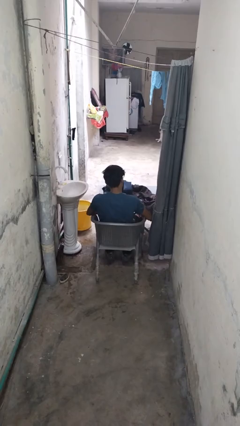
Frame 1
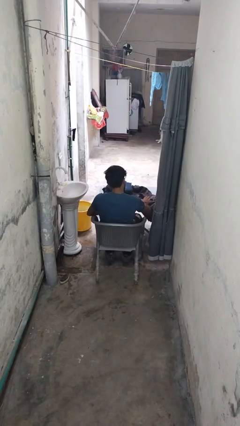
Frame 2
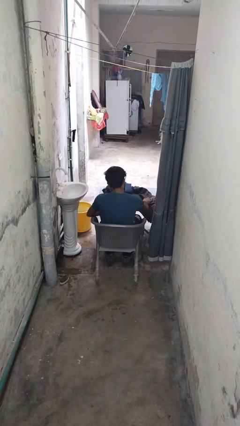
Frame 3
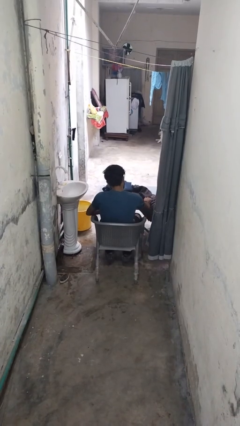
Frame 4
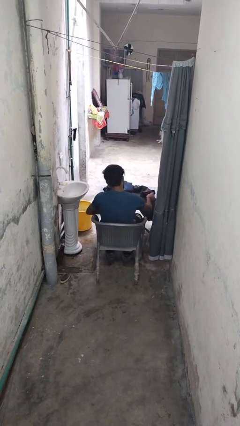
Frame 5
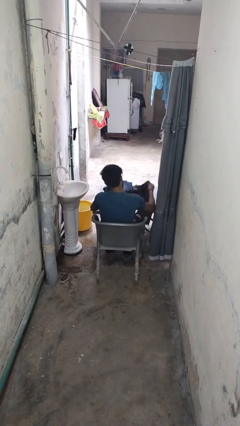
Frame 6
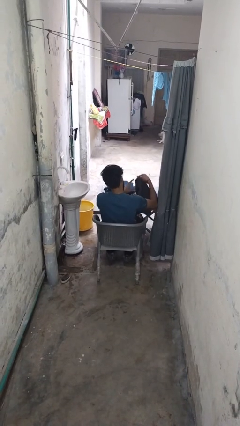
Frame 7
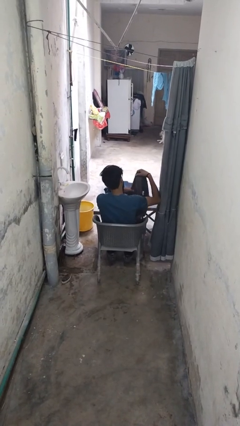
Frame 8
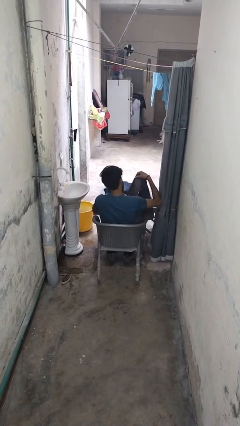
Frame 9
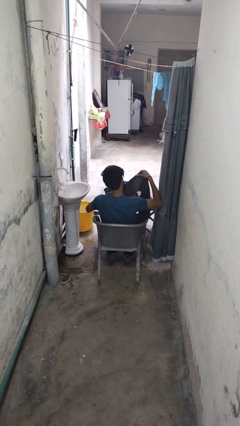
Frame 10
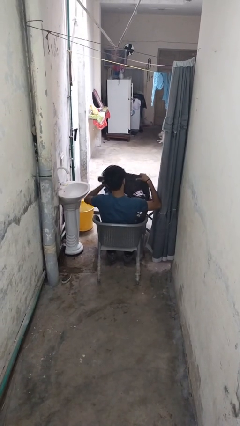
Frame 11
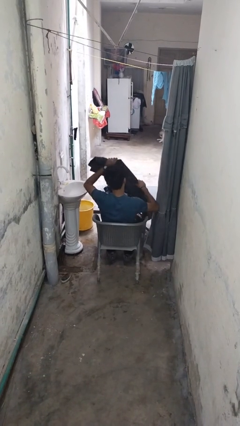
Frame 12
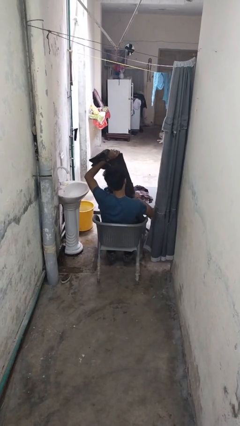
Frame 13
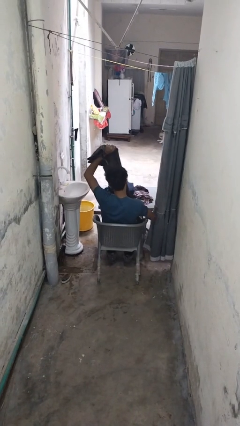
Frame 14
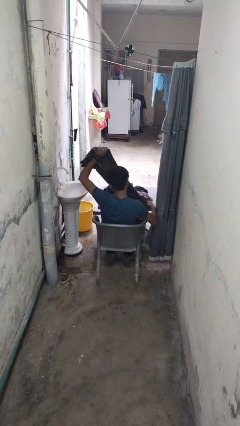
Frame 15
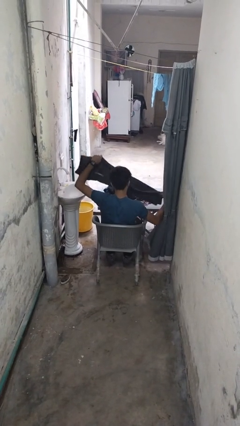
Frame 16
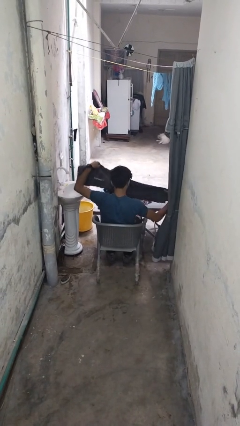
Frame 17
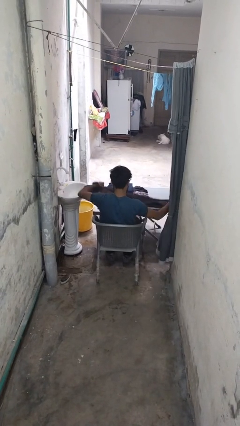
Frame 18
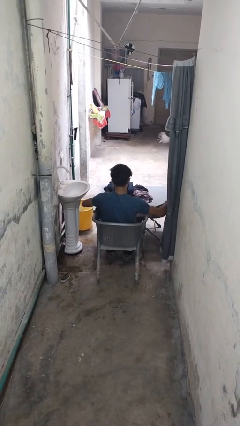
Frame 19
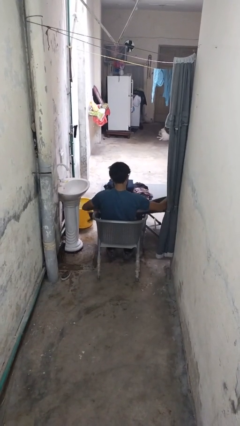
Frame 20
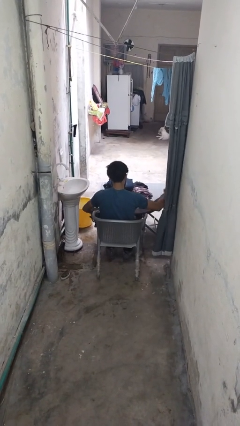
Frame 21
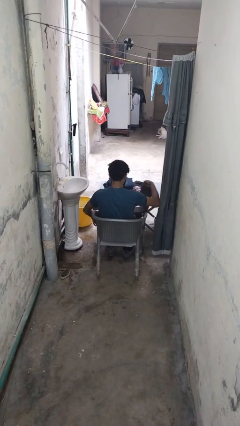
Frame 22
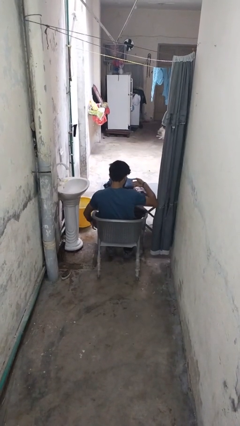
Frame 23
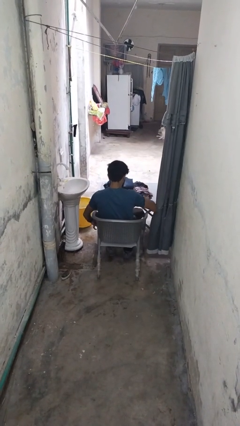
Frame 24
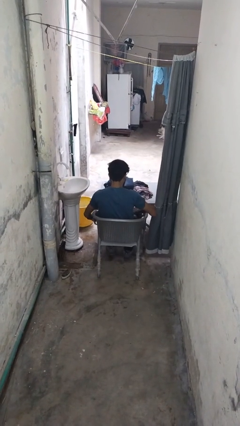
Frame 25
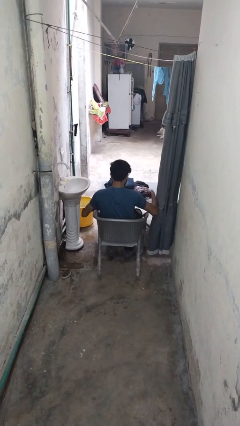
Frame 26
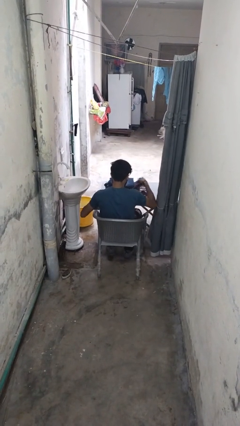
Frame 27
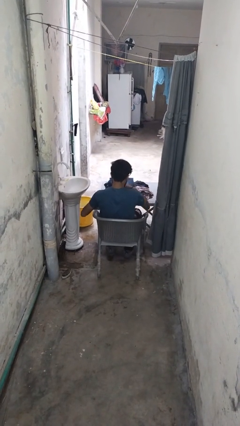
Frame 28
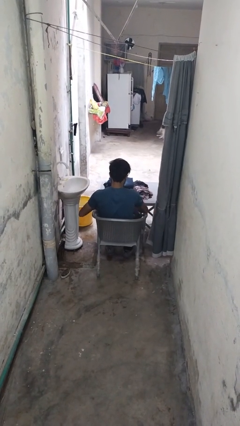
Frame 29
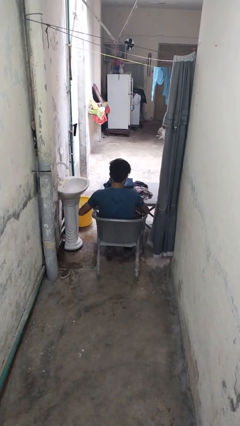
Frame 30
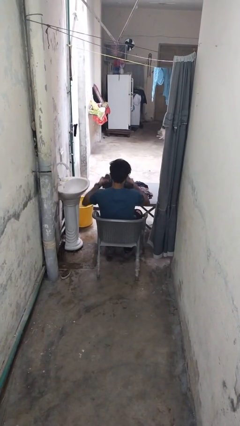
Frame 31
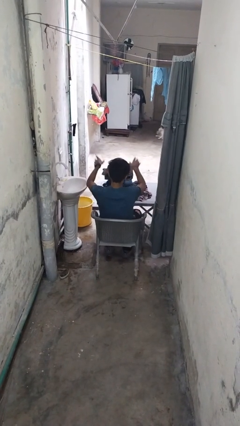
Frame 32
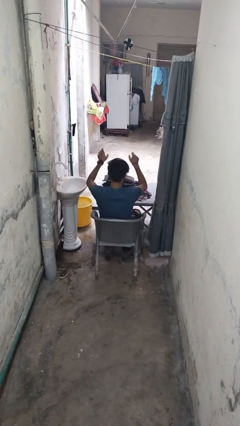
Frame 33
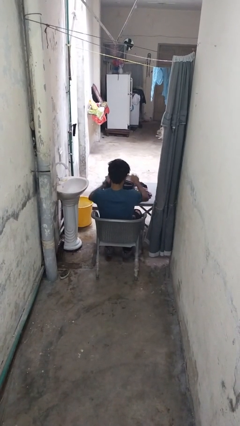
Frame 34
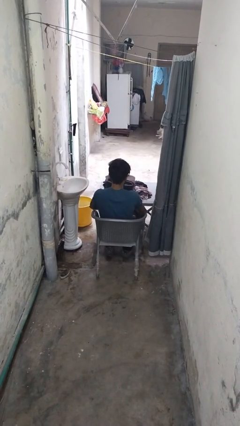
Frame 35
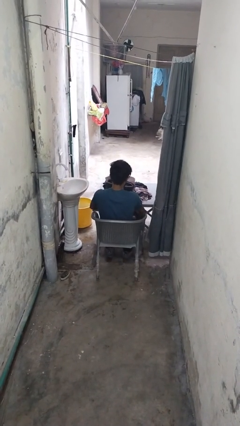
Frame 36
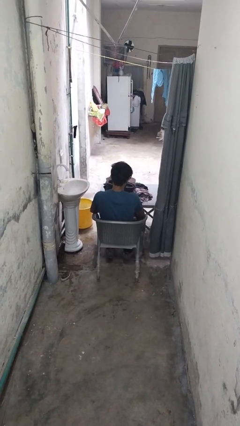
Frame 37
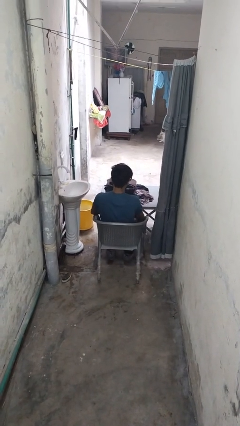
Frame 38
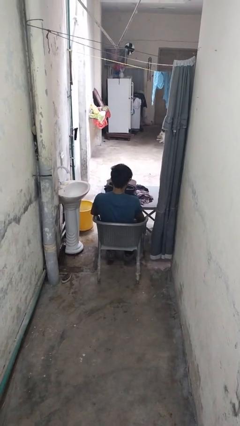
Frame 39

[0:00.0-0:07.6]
person folds pants

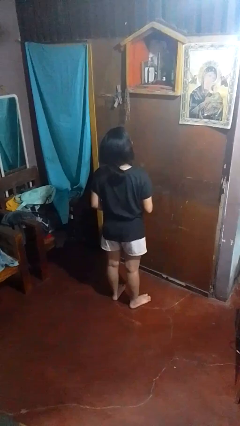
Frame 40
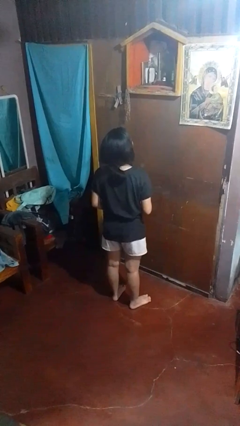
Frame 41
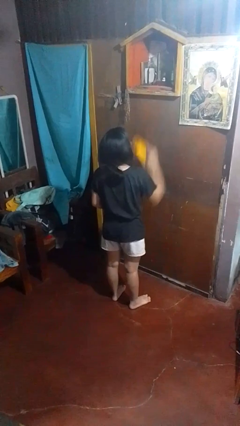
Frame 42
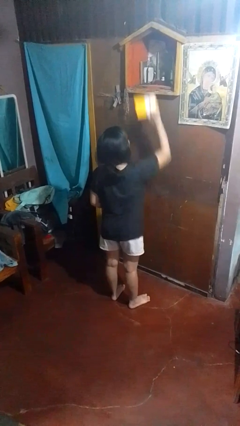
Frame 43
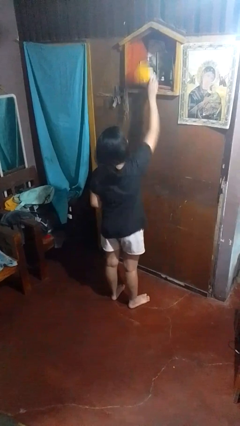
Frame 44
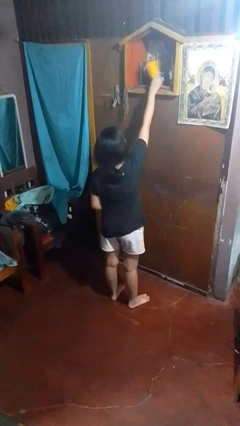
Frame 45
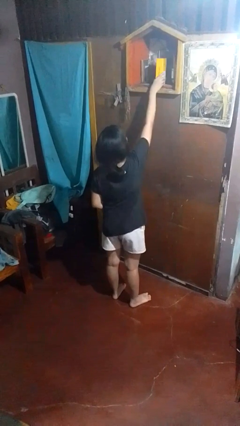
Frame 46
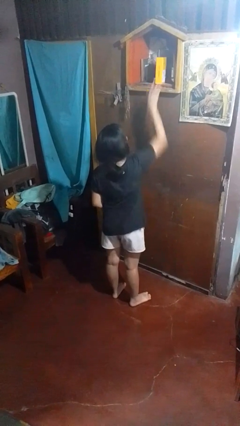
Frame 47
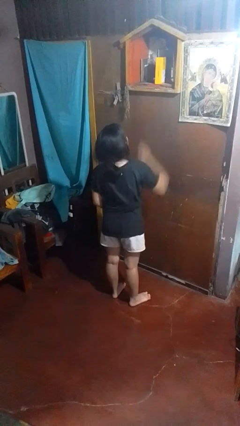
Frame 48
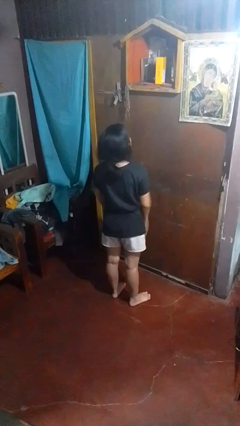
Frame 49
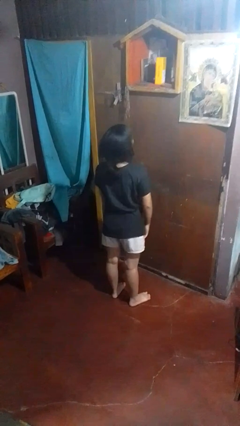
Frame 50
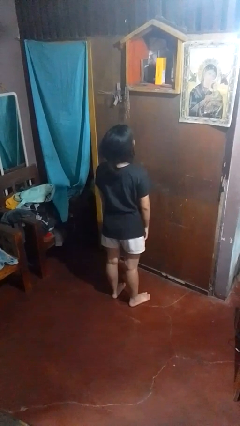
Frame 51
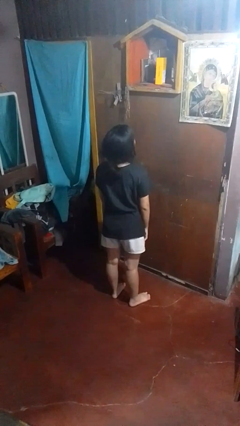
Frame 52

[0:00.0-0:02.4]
person puts down object on shelf

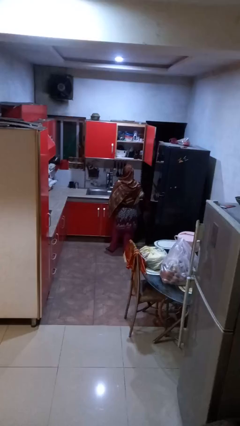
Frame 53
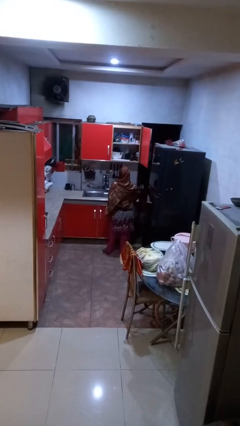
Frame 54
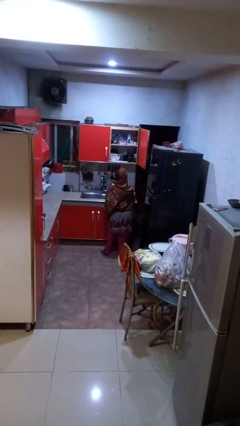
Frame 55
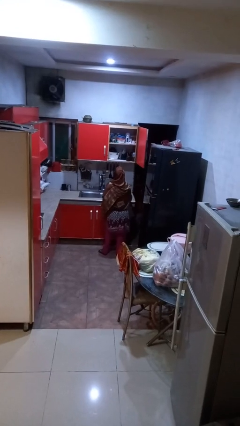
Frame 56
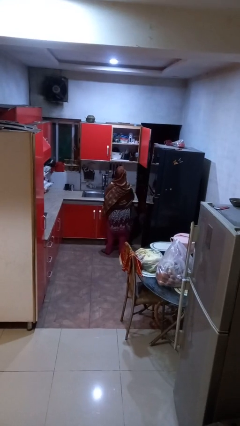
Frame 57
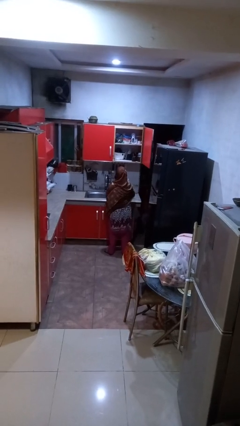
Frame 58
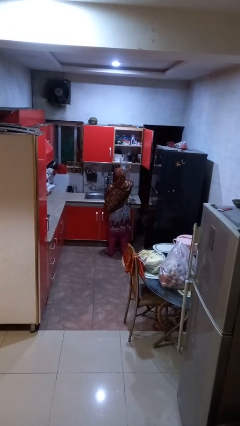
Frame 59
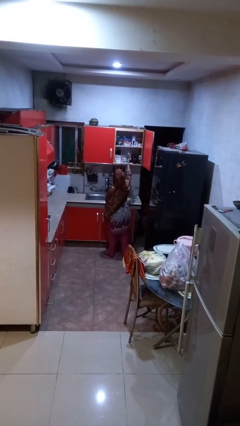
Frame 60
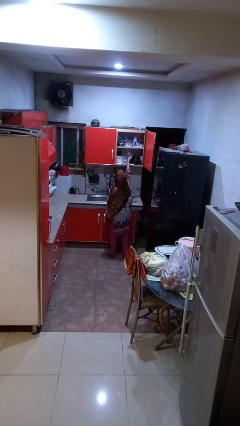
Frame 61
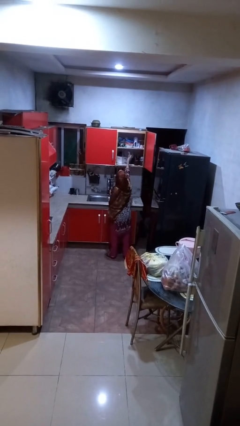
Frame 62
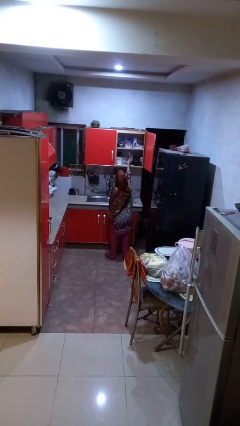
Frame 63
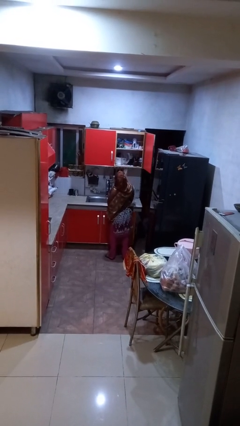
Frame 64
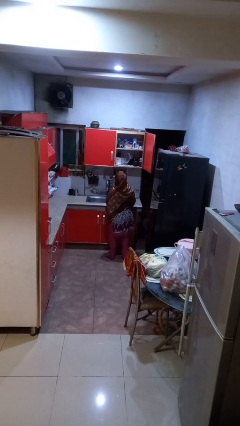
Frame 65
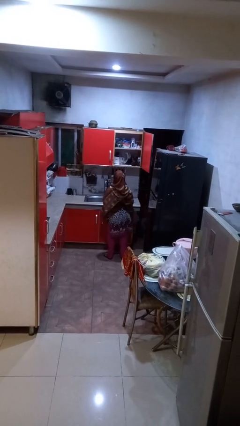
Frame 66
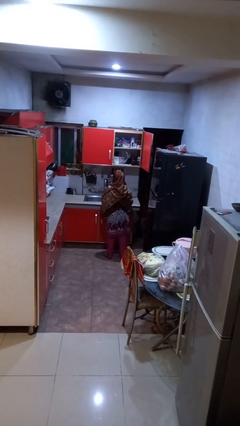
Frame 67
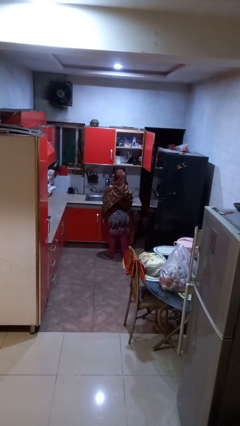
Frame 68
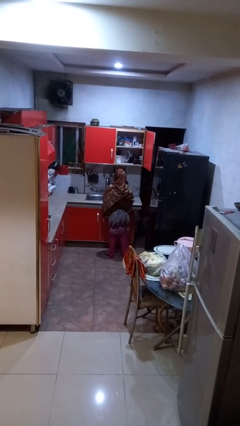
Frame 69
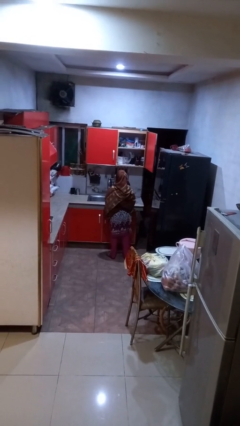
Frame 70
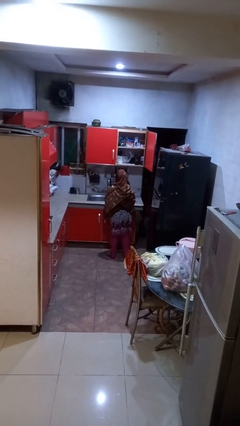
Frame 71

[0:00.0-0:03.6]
person puts object in cabinet

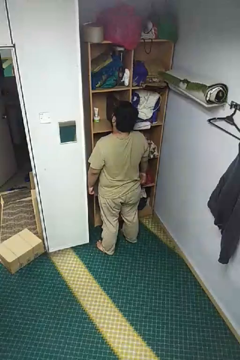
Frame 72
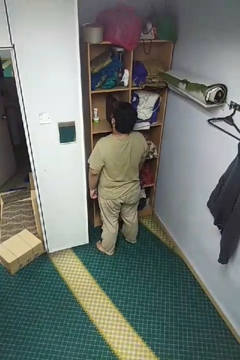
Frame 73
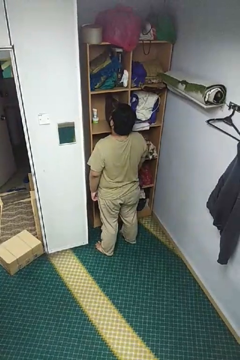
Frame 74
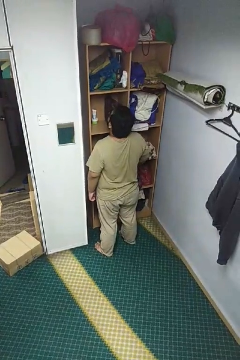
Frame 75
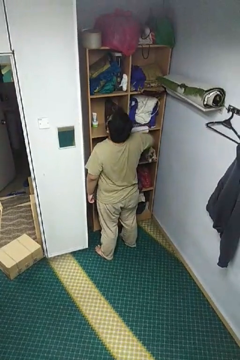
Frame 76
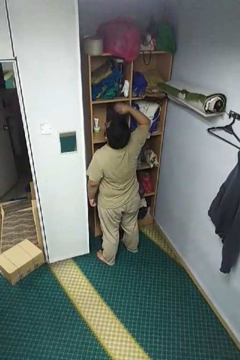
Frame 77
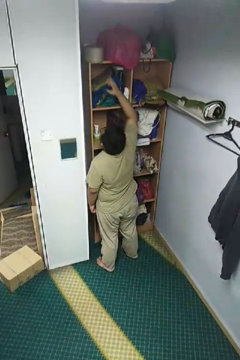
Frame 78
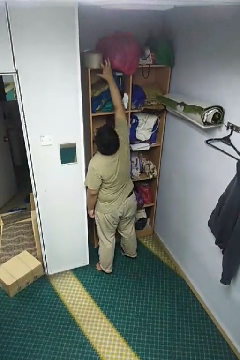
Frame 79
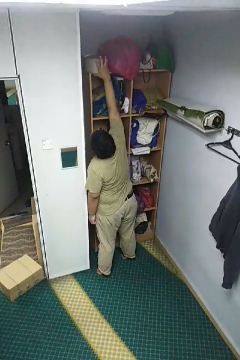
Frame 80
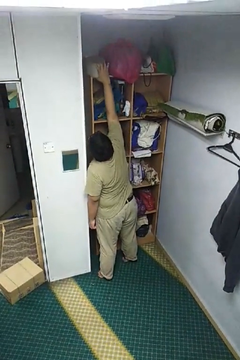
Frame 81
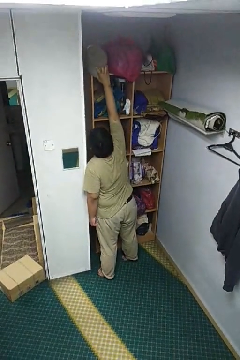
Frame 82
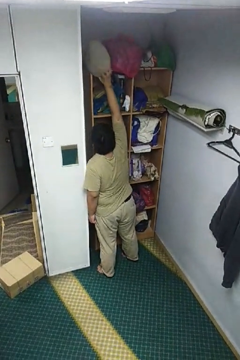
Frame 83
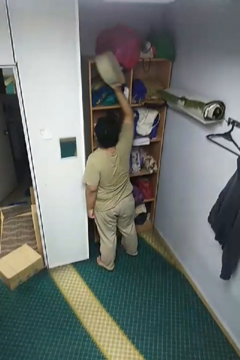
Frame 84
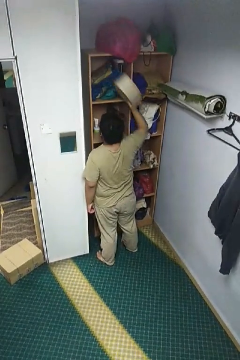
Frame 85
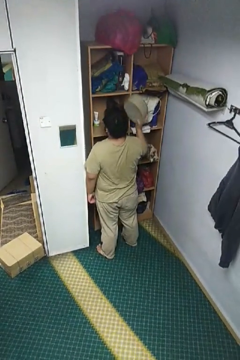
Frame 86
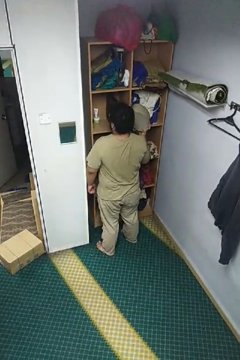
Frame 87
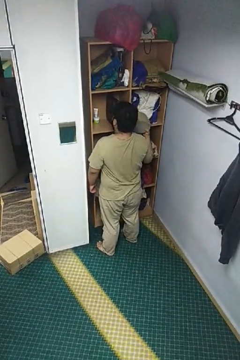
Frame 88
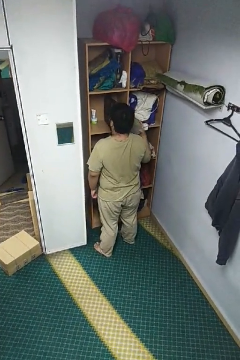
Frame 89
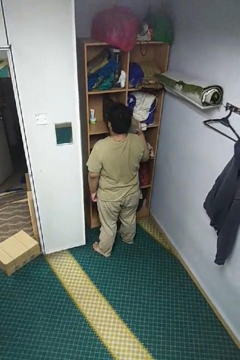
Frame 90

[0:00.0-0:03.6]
person picks up object from shelf

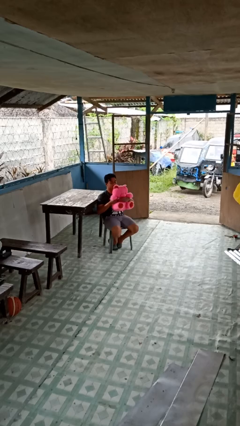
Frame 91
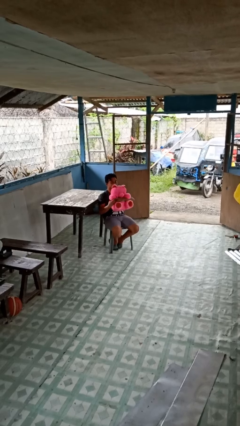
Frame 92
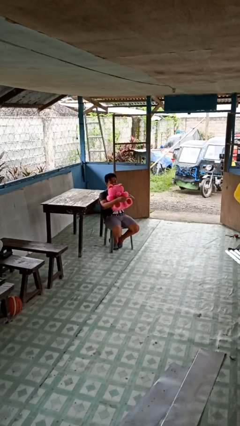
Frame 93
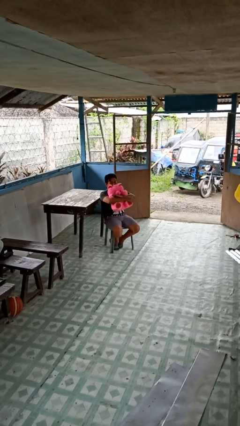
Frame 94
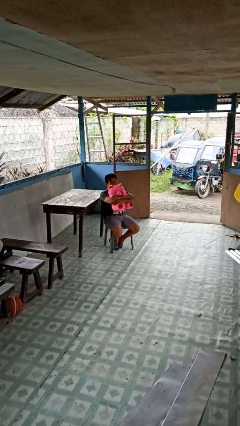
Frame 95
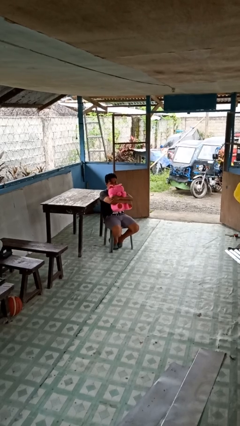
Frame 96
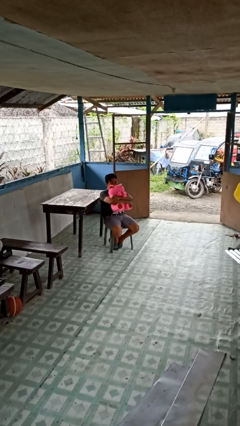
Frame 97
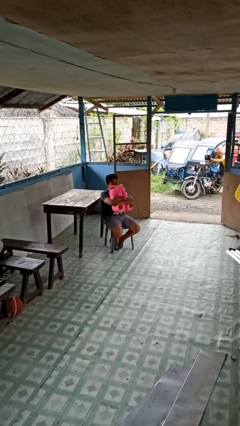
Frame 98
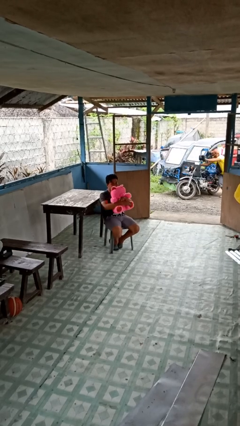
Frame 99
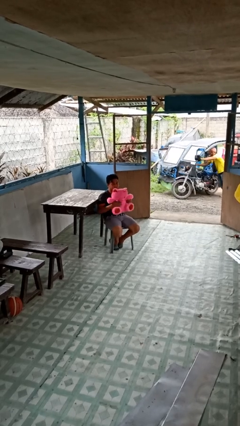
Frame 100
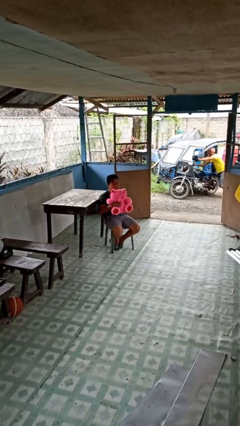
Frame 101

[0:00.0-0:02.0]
person hugs stuffed animal
